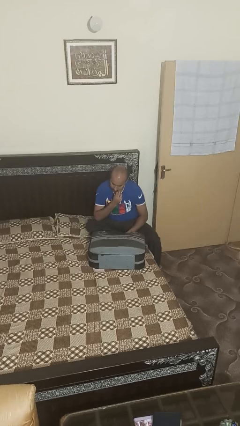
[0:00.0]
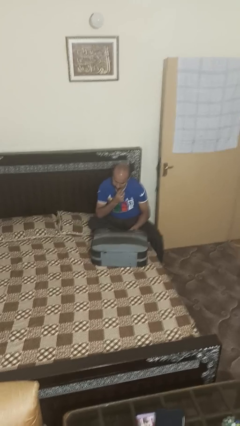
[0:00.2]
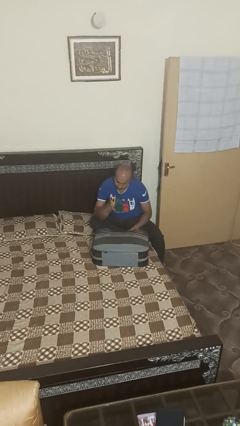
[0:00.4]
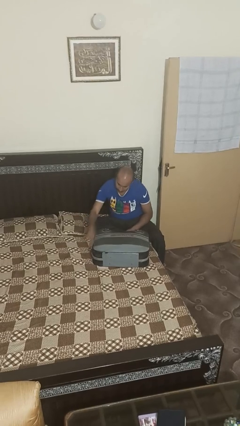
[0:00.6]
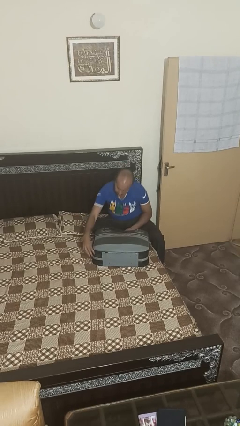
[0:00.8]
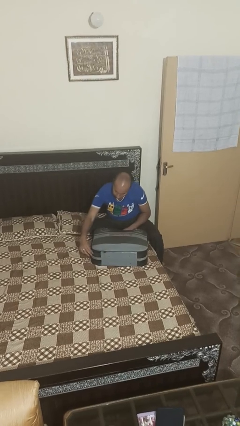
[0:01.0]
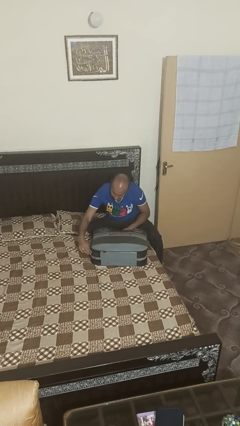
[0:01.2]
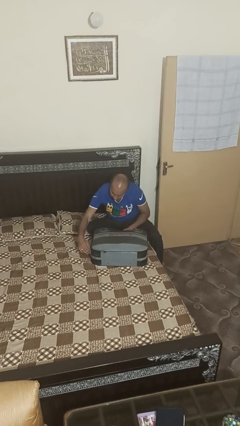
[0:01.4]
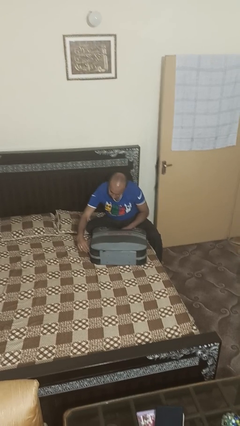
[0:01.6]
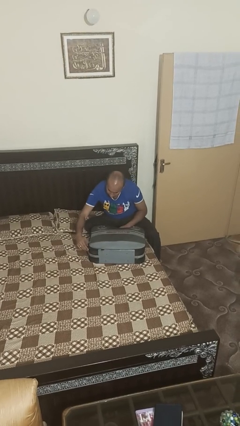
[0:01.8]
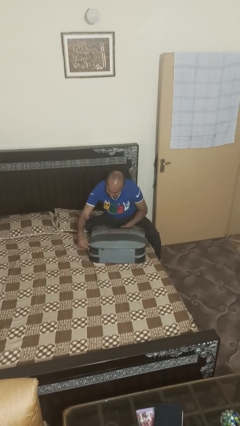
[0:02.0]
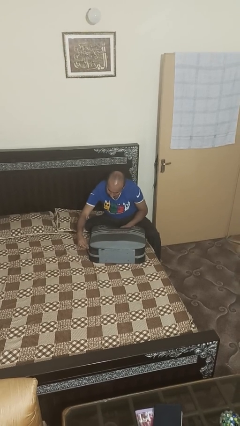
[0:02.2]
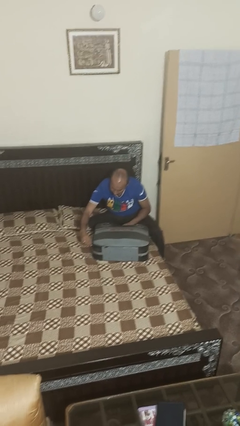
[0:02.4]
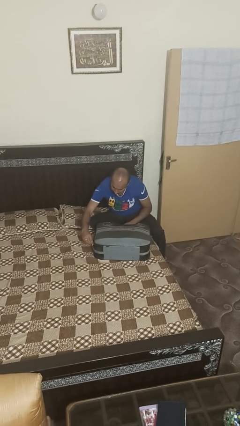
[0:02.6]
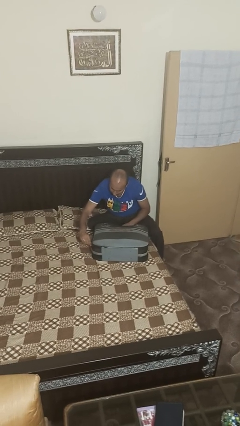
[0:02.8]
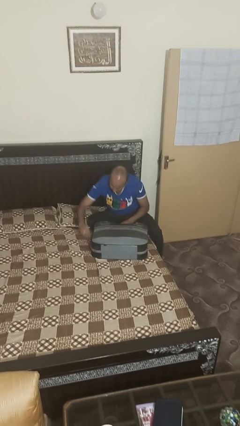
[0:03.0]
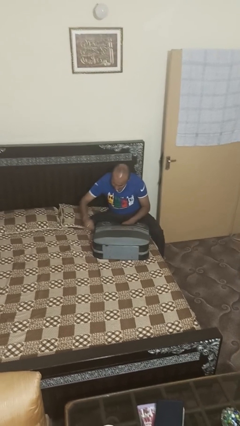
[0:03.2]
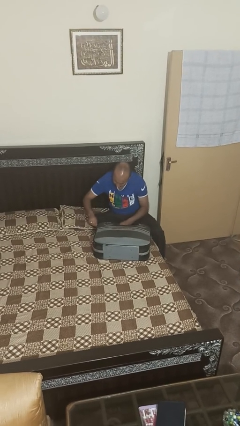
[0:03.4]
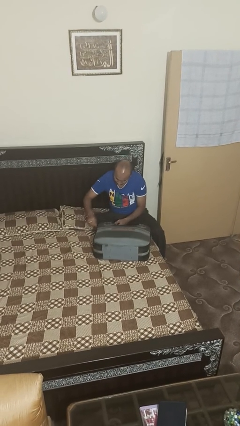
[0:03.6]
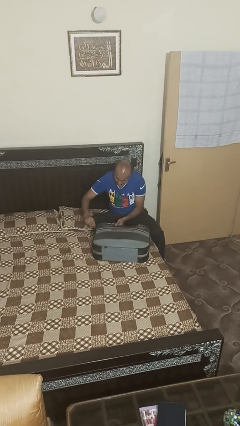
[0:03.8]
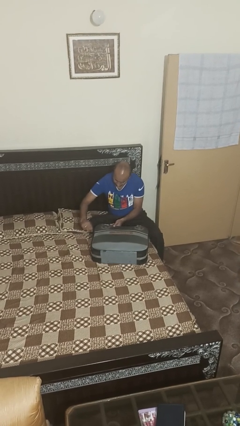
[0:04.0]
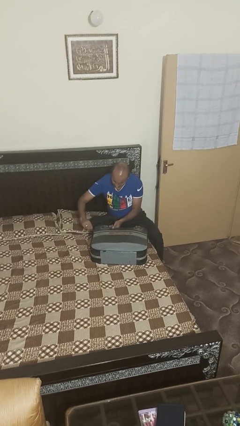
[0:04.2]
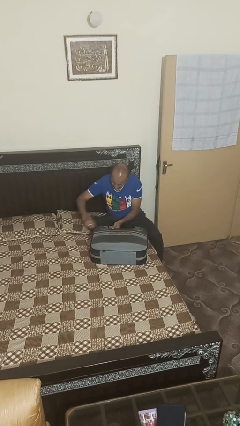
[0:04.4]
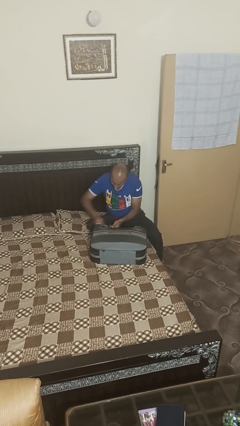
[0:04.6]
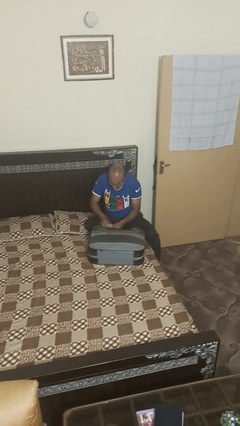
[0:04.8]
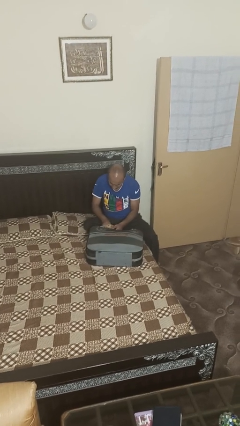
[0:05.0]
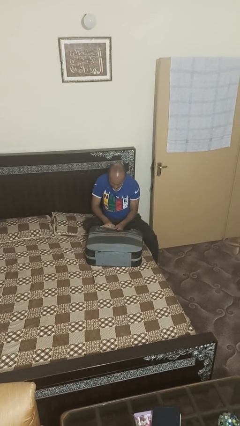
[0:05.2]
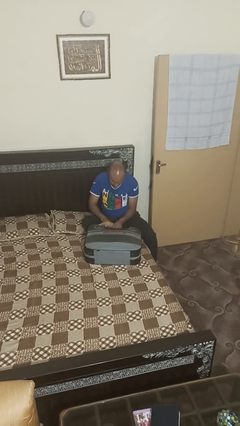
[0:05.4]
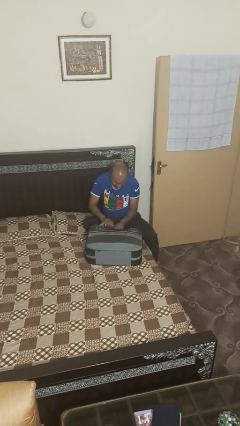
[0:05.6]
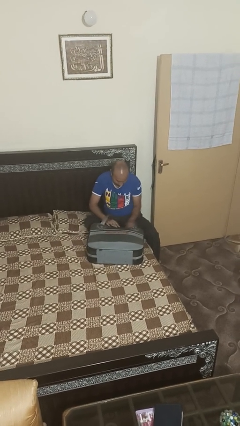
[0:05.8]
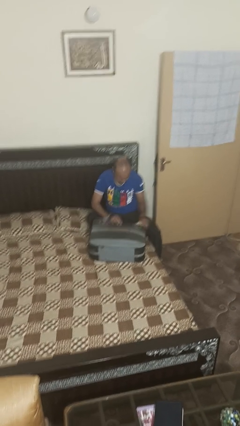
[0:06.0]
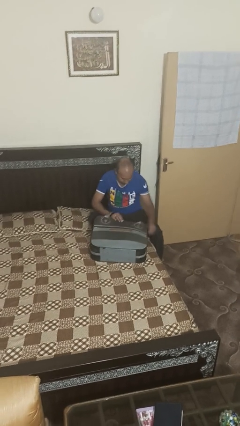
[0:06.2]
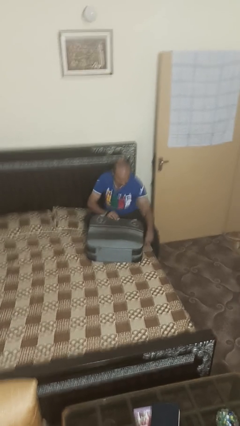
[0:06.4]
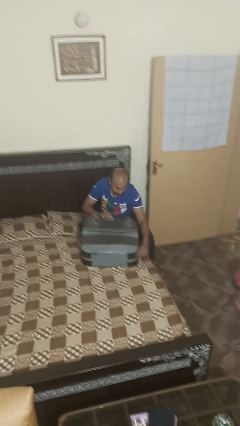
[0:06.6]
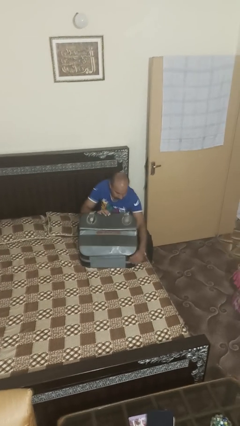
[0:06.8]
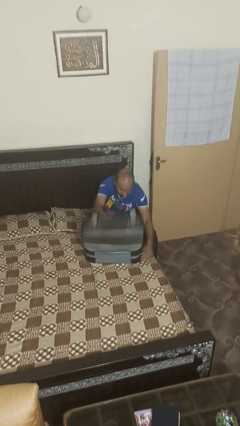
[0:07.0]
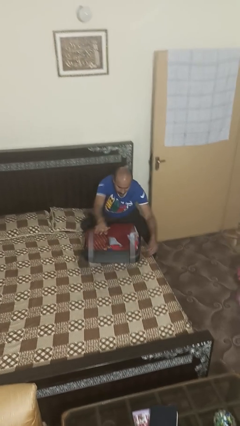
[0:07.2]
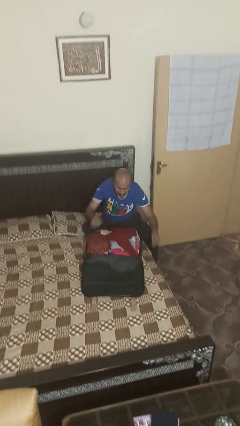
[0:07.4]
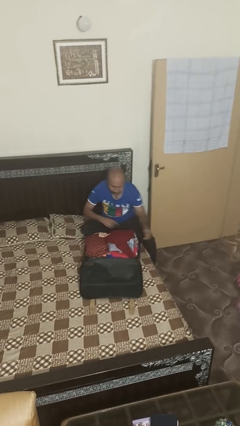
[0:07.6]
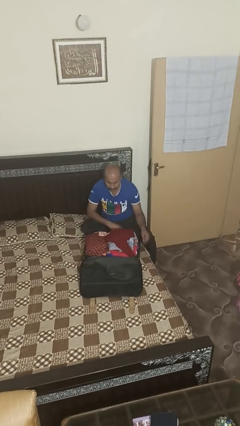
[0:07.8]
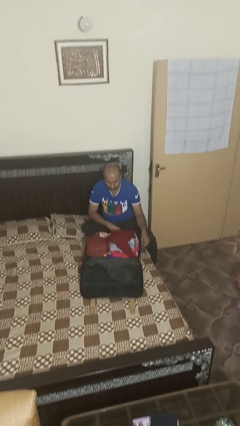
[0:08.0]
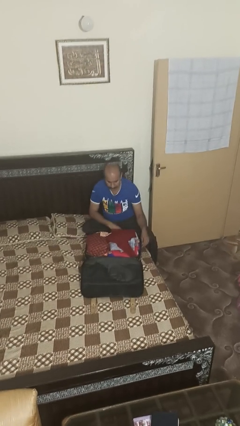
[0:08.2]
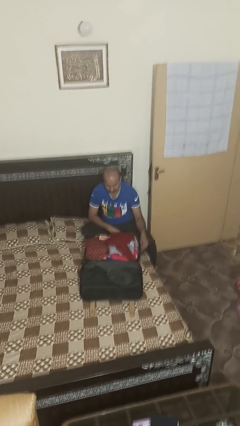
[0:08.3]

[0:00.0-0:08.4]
person opens suitcase

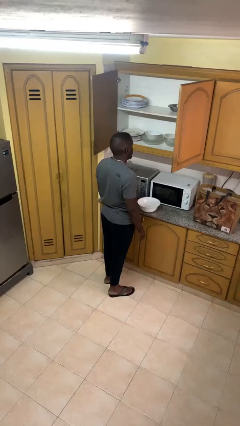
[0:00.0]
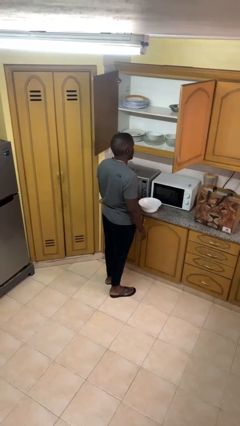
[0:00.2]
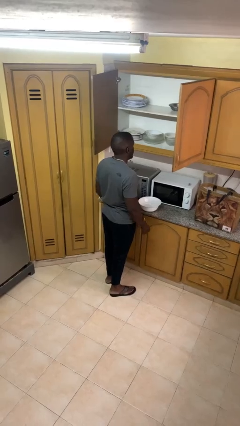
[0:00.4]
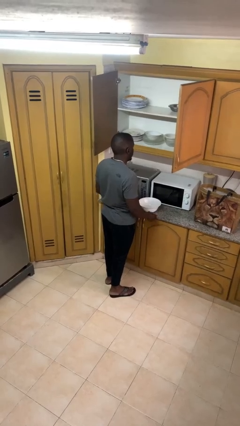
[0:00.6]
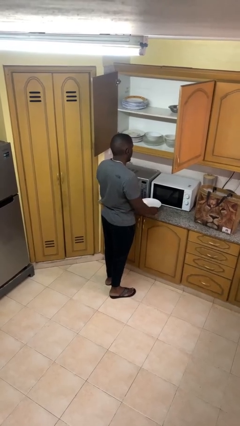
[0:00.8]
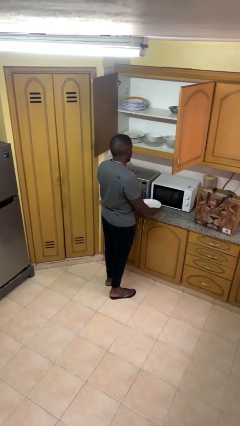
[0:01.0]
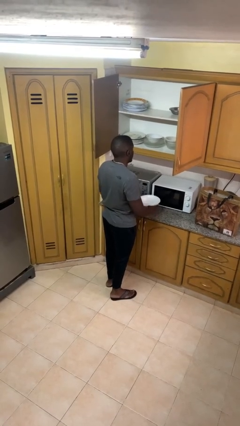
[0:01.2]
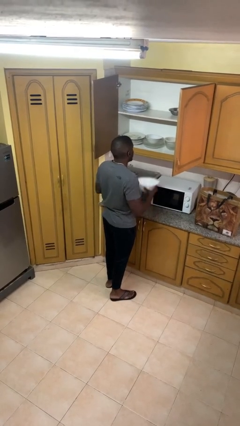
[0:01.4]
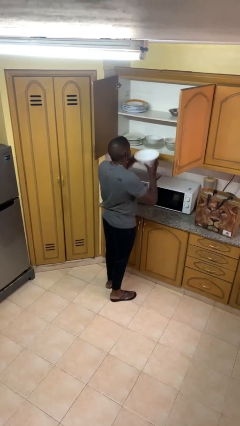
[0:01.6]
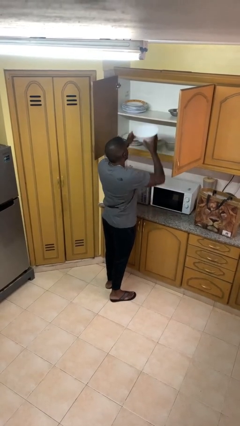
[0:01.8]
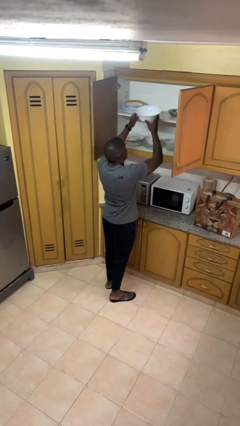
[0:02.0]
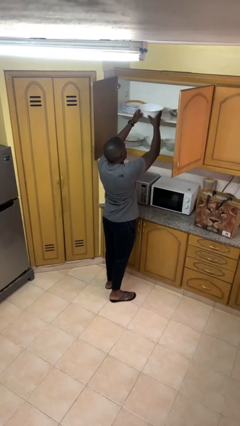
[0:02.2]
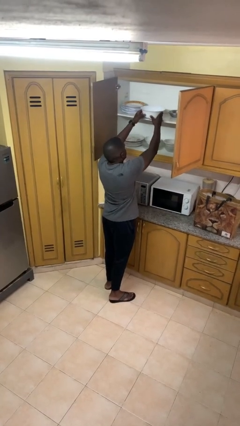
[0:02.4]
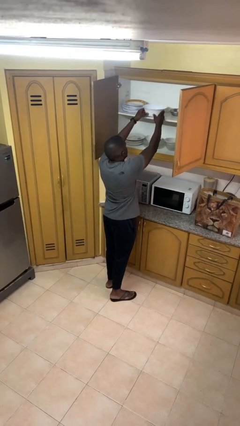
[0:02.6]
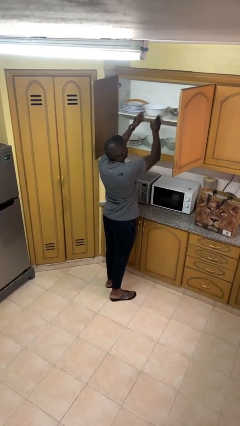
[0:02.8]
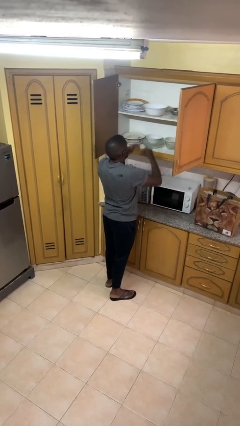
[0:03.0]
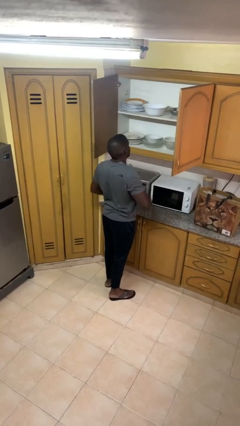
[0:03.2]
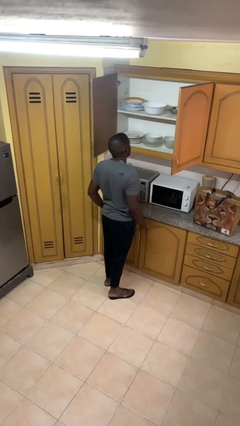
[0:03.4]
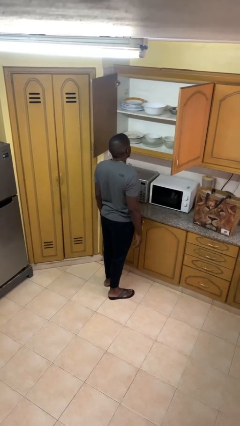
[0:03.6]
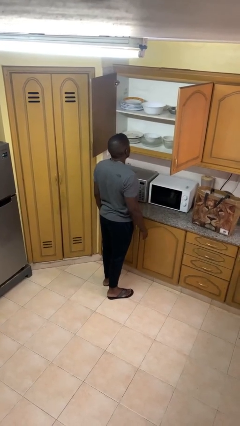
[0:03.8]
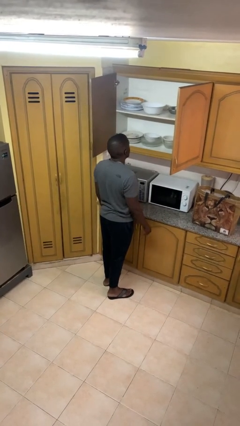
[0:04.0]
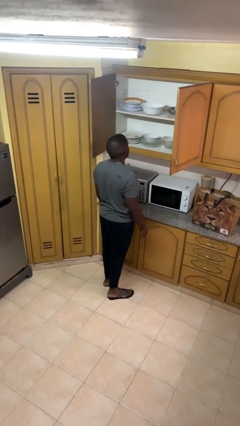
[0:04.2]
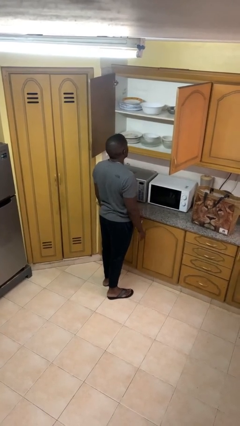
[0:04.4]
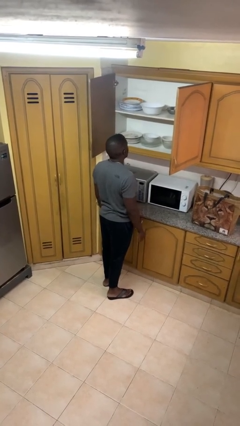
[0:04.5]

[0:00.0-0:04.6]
person puts object in cabinet

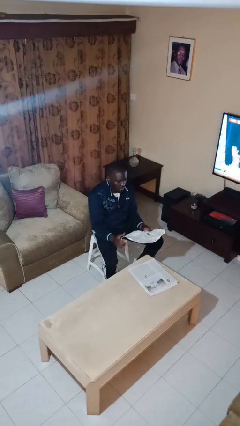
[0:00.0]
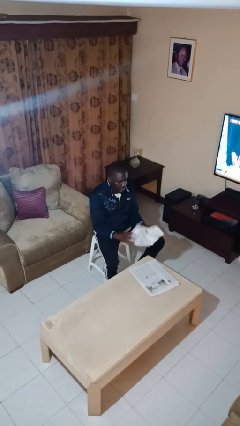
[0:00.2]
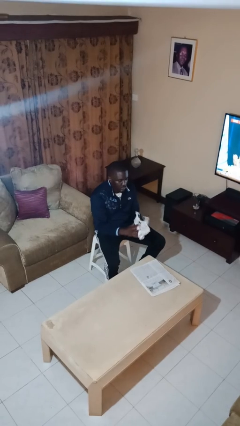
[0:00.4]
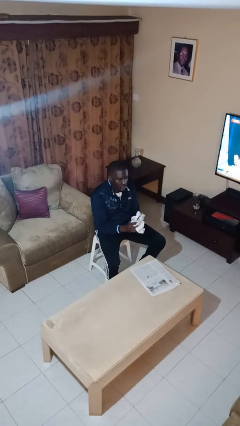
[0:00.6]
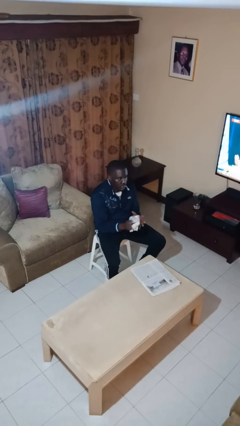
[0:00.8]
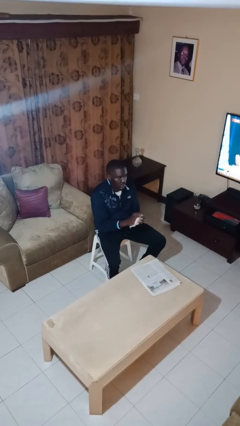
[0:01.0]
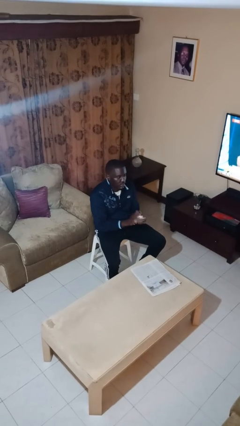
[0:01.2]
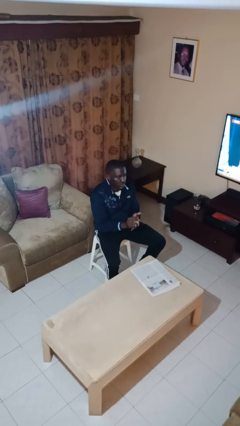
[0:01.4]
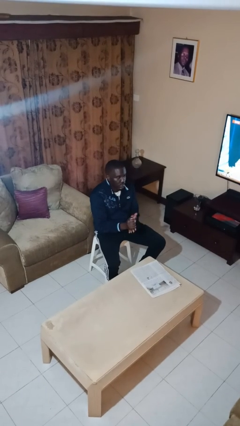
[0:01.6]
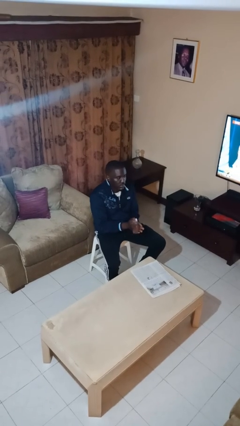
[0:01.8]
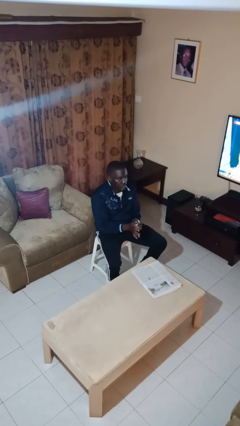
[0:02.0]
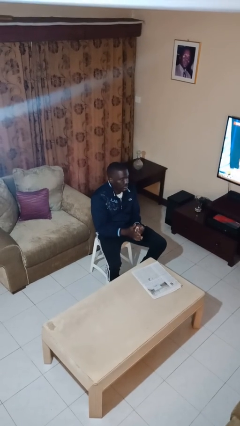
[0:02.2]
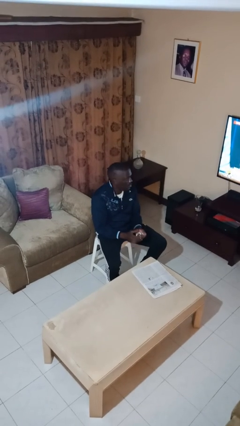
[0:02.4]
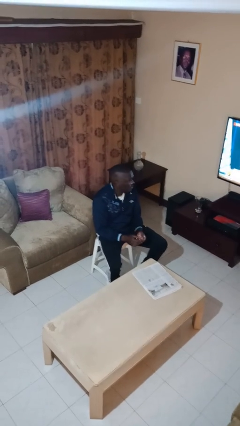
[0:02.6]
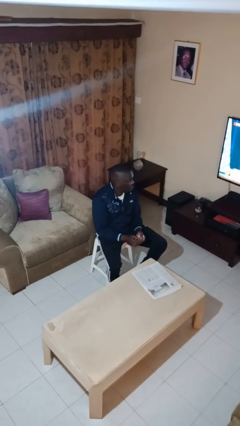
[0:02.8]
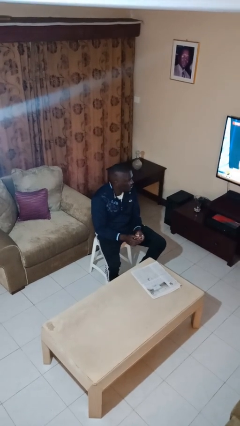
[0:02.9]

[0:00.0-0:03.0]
person crumples paper

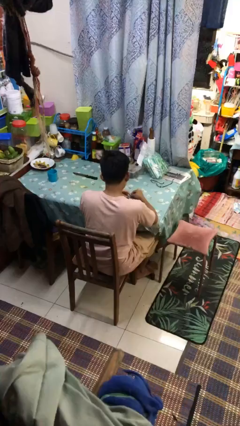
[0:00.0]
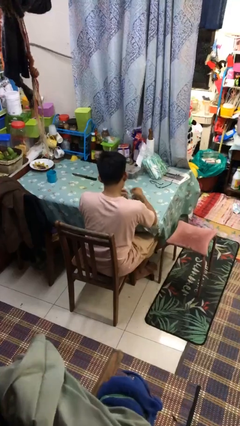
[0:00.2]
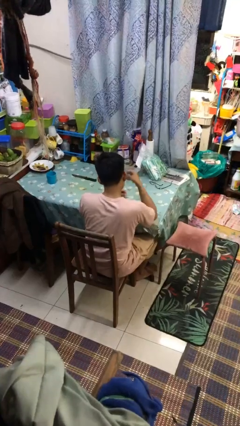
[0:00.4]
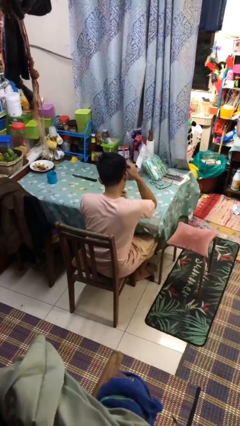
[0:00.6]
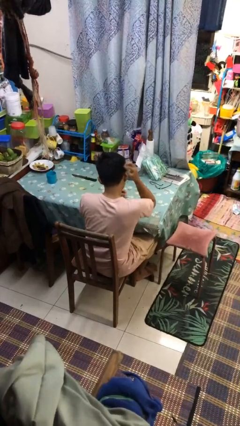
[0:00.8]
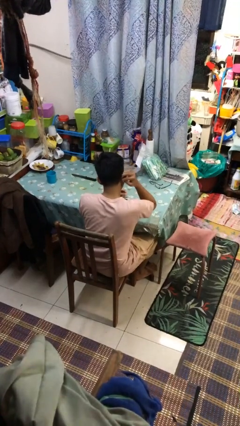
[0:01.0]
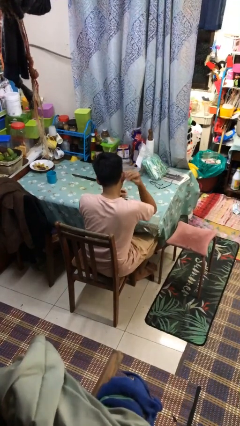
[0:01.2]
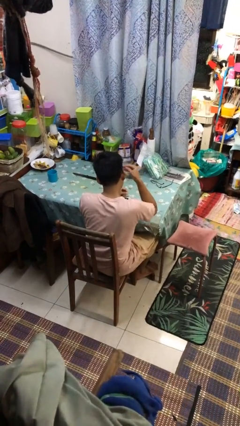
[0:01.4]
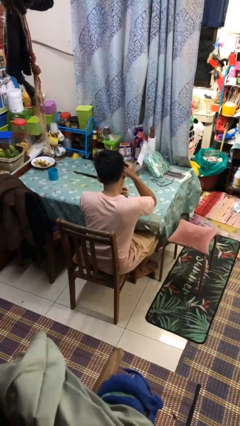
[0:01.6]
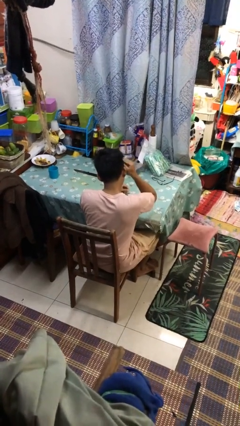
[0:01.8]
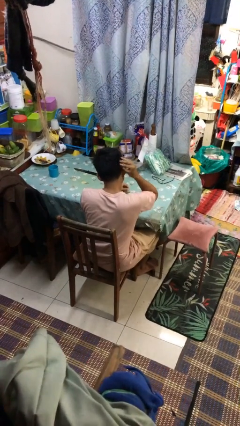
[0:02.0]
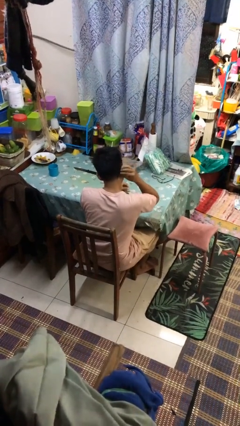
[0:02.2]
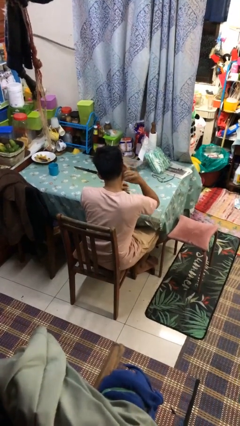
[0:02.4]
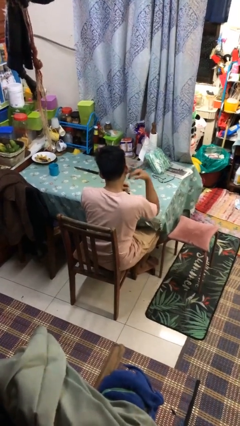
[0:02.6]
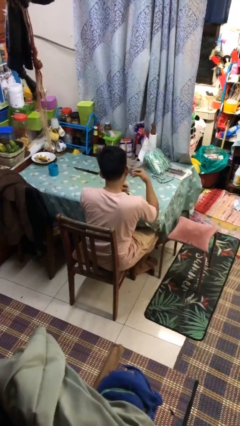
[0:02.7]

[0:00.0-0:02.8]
person strokes hair
